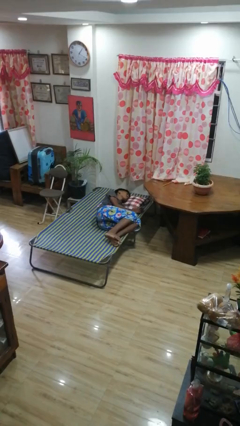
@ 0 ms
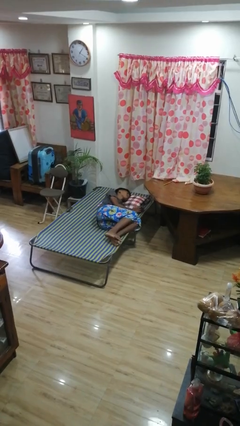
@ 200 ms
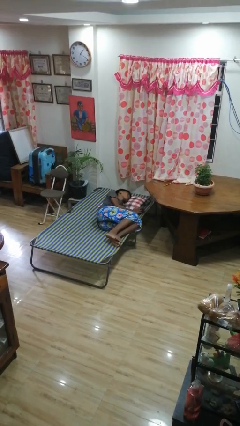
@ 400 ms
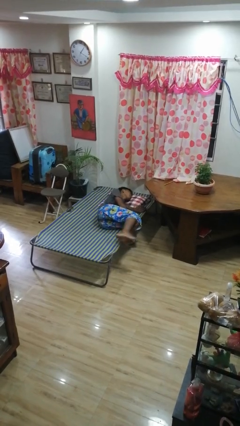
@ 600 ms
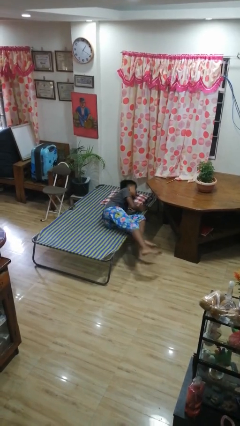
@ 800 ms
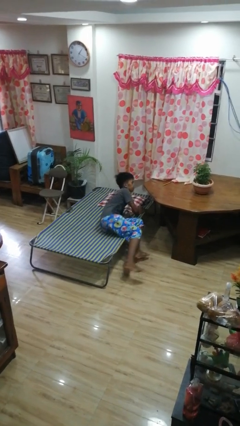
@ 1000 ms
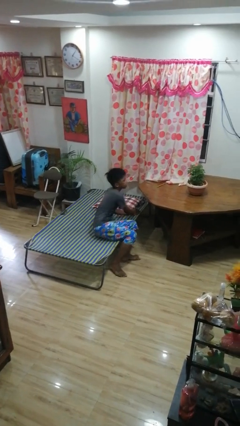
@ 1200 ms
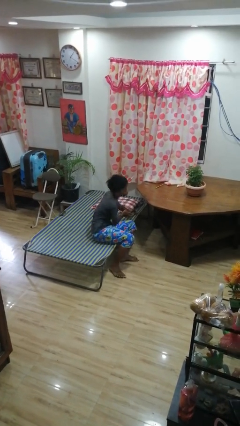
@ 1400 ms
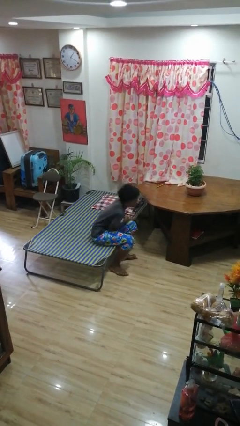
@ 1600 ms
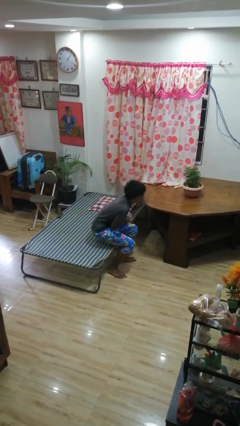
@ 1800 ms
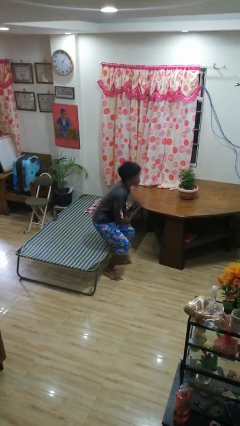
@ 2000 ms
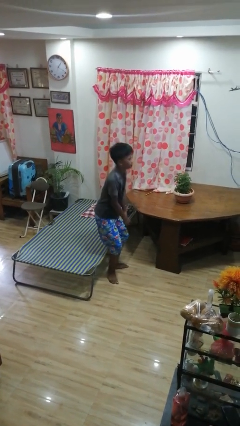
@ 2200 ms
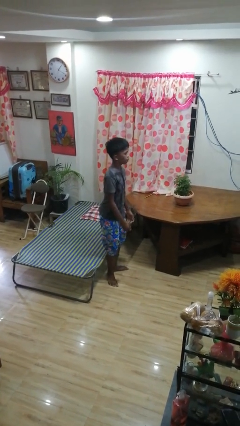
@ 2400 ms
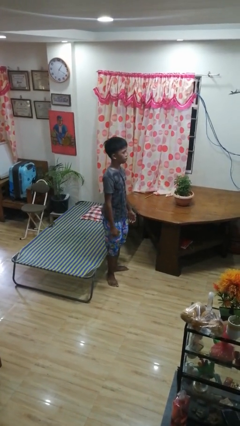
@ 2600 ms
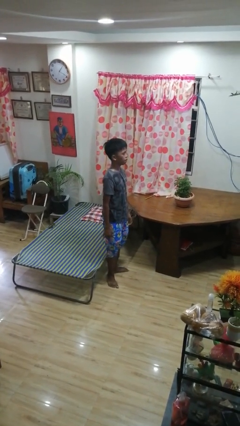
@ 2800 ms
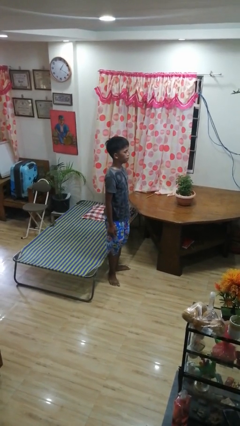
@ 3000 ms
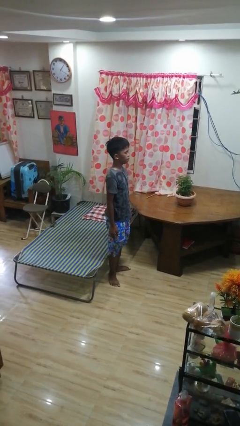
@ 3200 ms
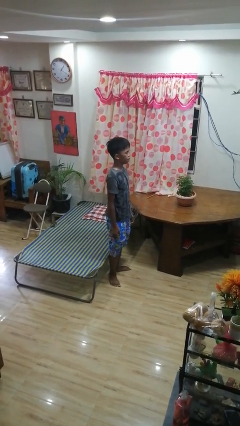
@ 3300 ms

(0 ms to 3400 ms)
person stands up

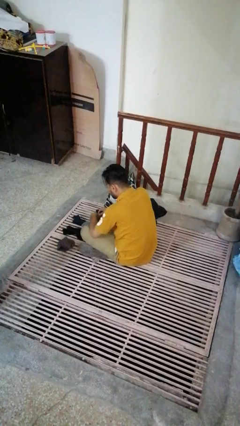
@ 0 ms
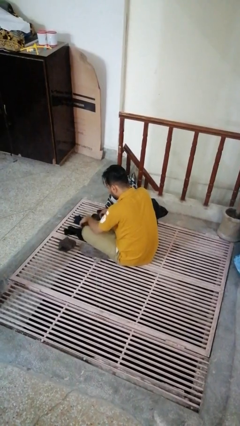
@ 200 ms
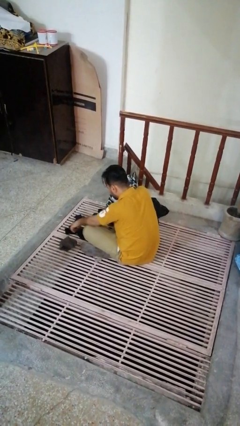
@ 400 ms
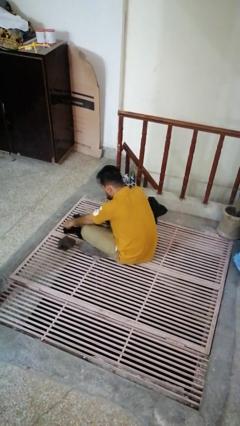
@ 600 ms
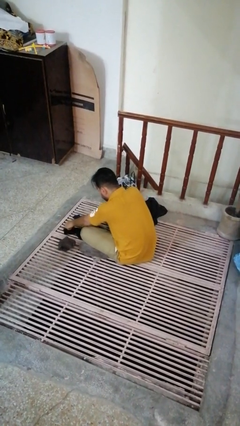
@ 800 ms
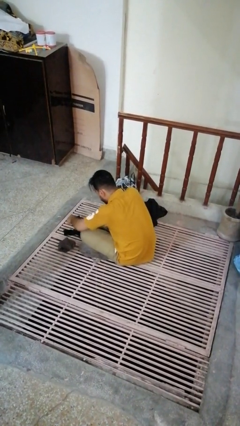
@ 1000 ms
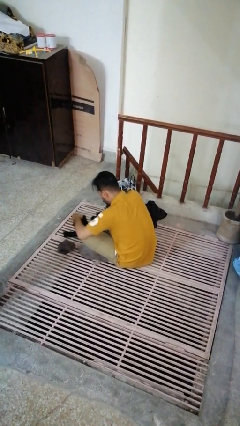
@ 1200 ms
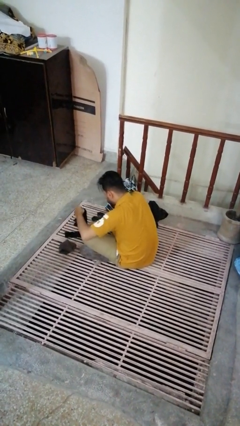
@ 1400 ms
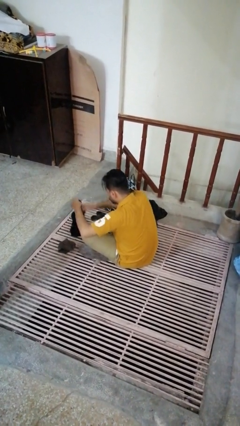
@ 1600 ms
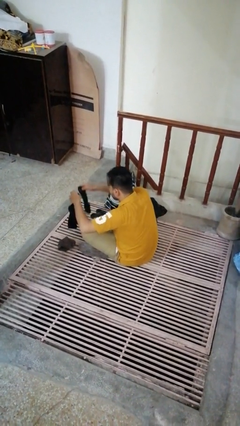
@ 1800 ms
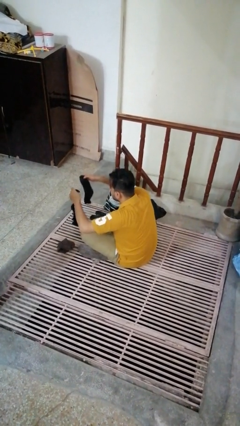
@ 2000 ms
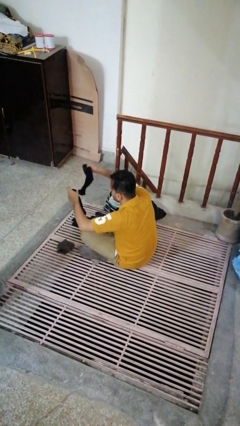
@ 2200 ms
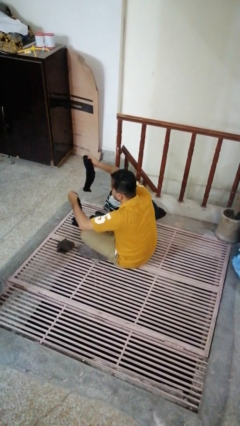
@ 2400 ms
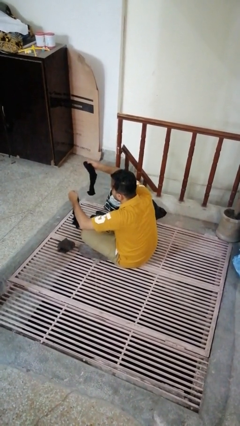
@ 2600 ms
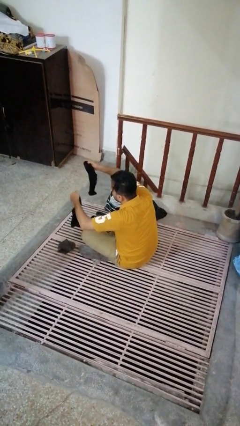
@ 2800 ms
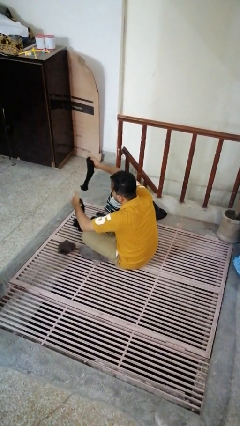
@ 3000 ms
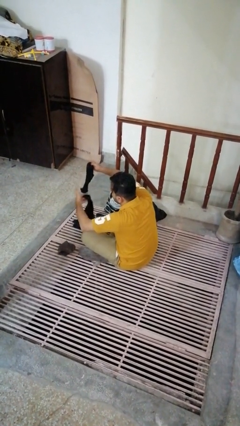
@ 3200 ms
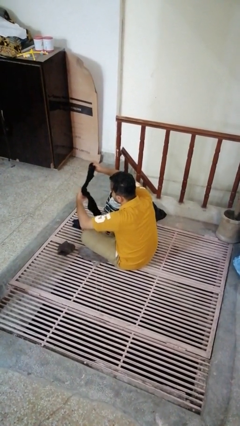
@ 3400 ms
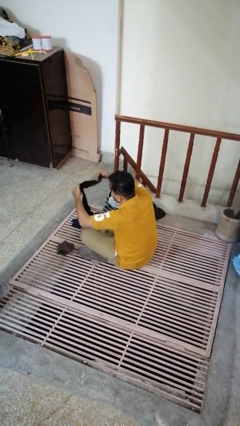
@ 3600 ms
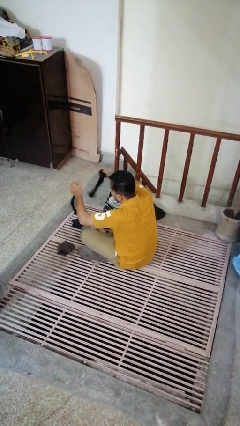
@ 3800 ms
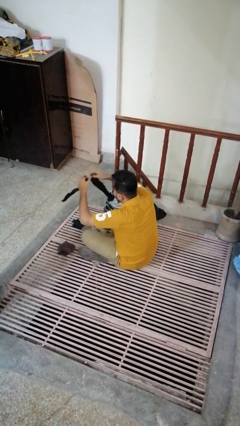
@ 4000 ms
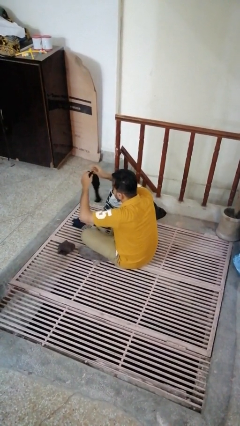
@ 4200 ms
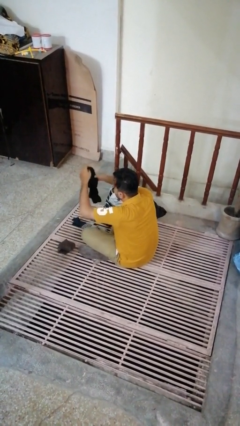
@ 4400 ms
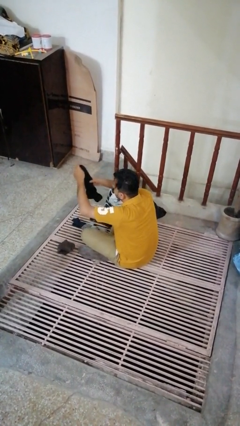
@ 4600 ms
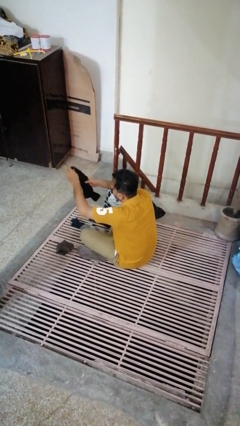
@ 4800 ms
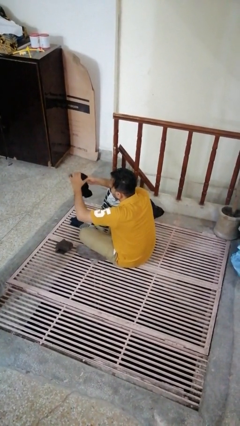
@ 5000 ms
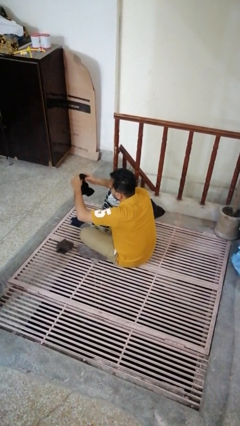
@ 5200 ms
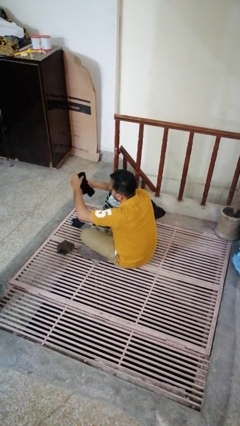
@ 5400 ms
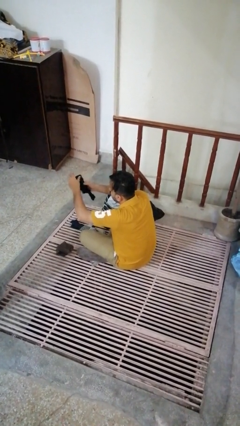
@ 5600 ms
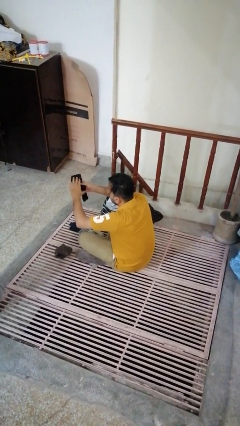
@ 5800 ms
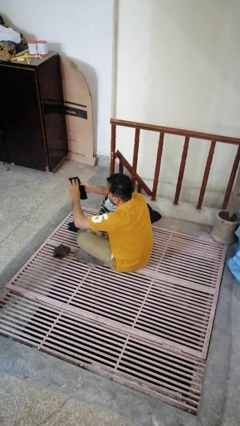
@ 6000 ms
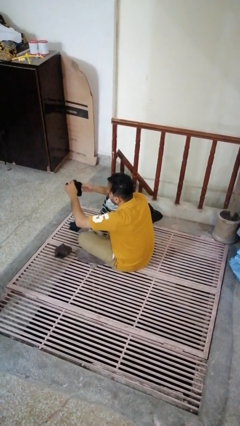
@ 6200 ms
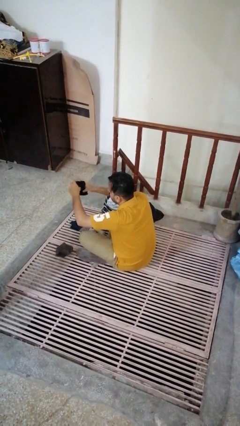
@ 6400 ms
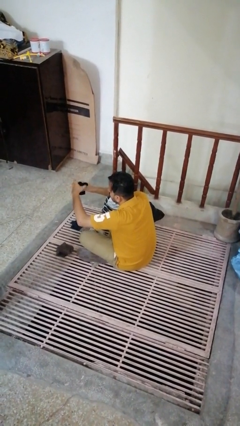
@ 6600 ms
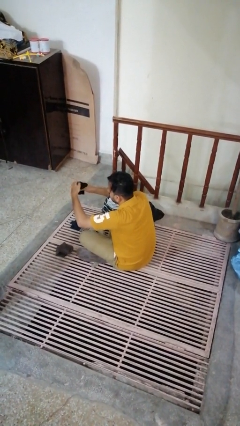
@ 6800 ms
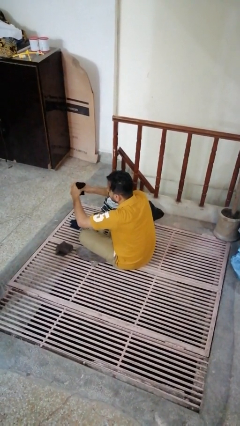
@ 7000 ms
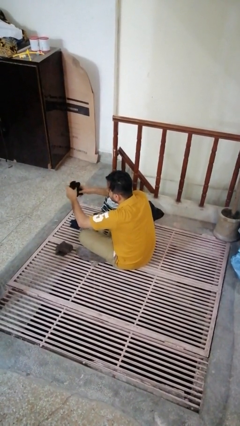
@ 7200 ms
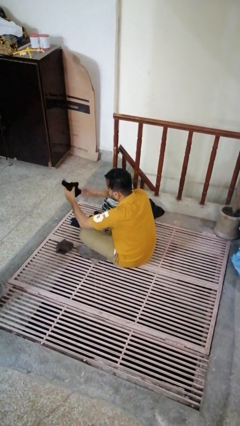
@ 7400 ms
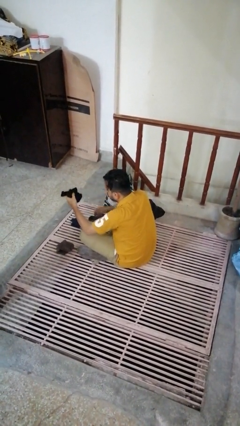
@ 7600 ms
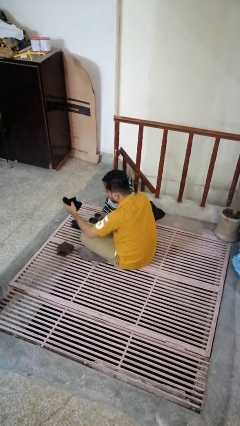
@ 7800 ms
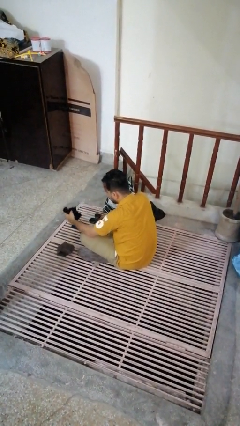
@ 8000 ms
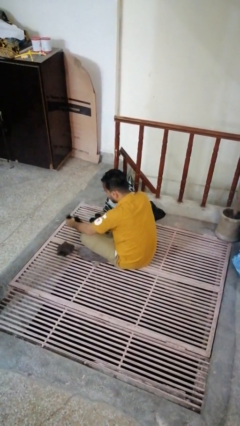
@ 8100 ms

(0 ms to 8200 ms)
person folds socks

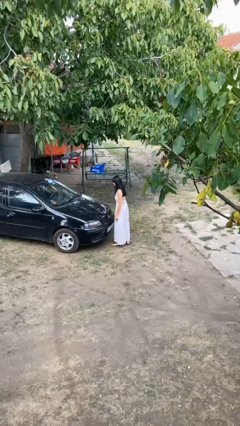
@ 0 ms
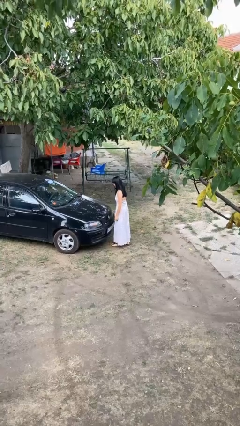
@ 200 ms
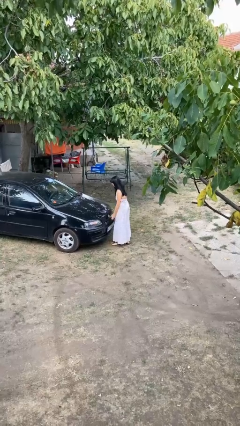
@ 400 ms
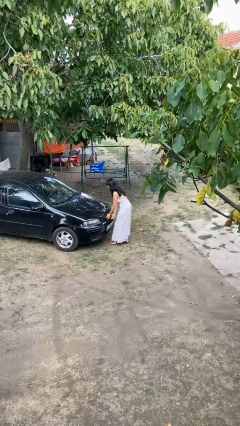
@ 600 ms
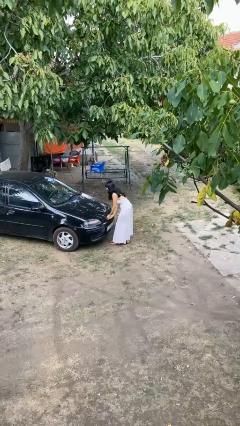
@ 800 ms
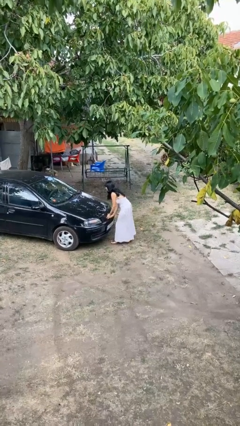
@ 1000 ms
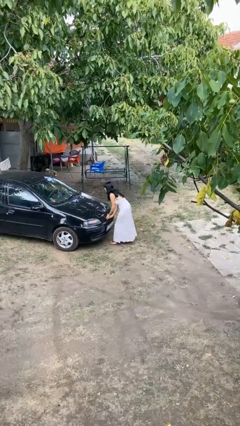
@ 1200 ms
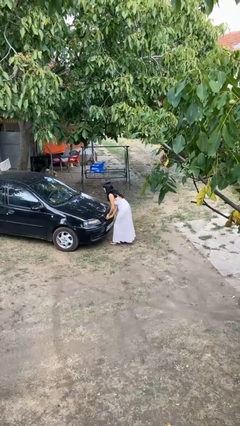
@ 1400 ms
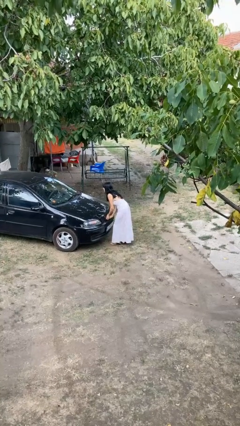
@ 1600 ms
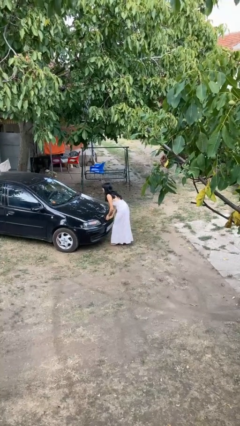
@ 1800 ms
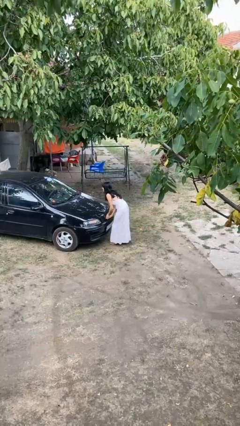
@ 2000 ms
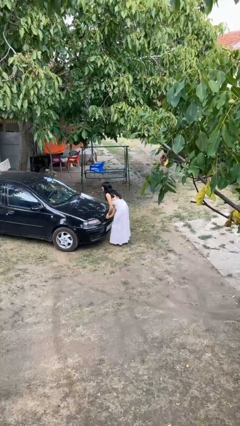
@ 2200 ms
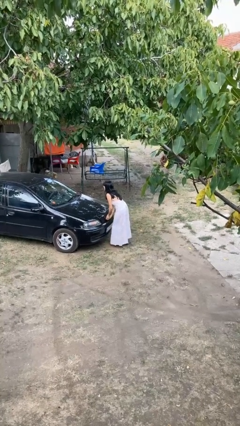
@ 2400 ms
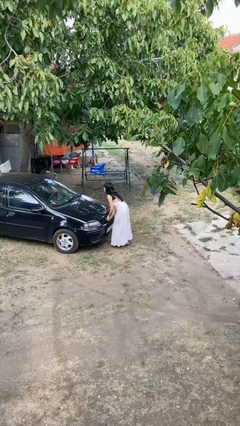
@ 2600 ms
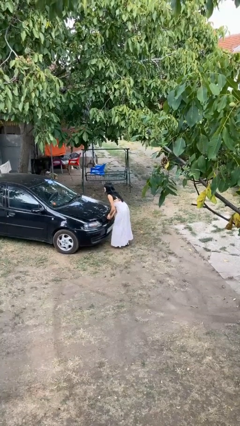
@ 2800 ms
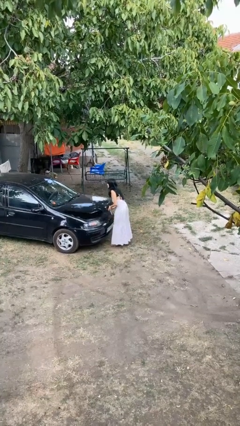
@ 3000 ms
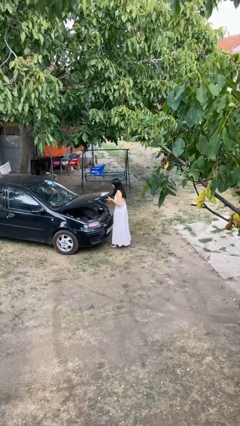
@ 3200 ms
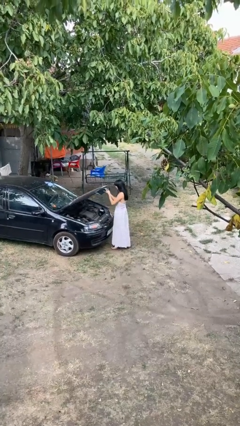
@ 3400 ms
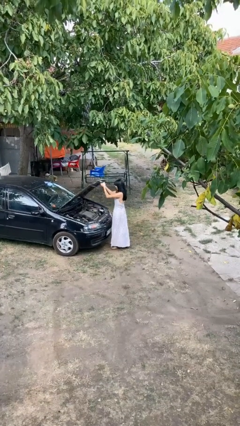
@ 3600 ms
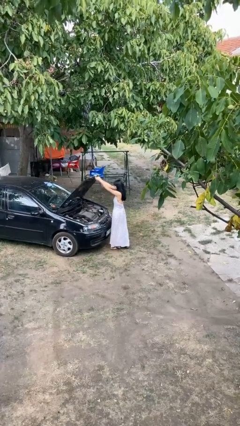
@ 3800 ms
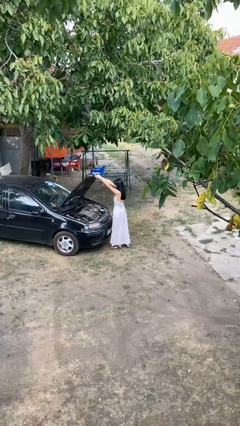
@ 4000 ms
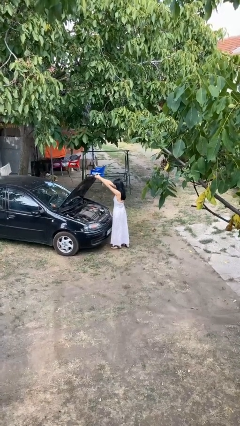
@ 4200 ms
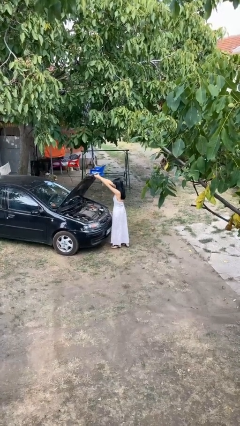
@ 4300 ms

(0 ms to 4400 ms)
person opens car hood

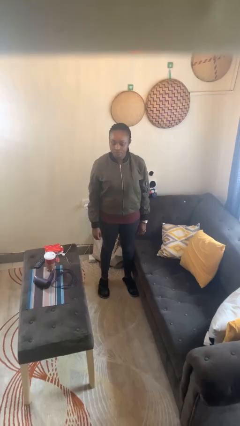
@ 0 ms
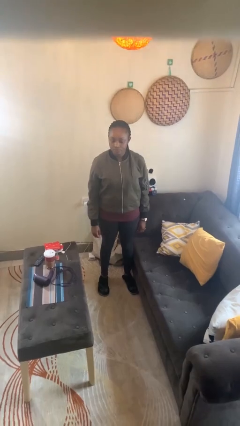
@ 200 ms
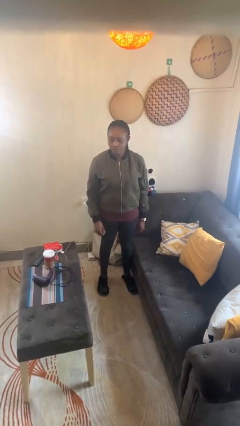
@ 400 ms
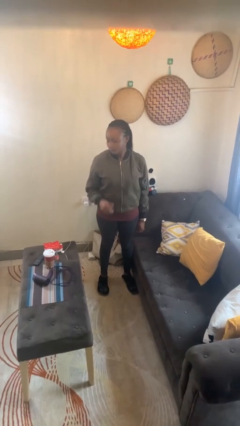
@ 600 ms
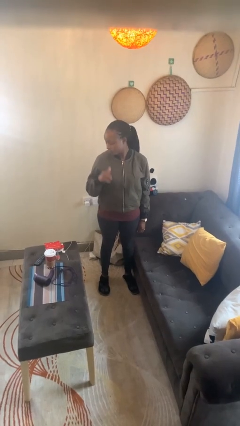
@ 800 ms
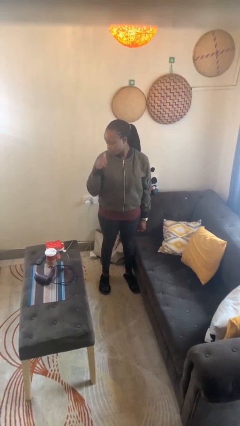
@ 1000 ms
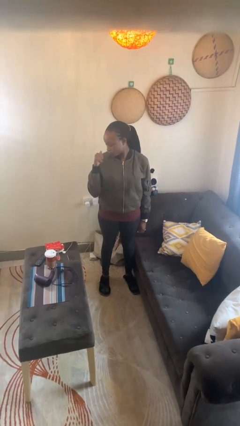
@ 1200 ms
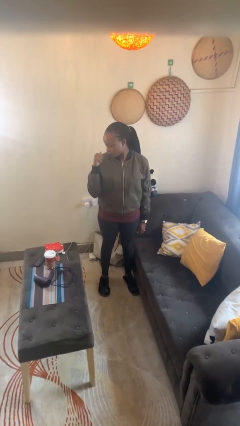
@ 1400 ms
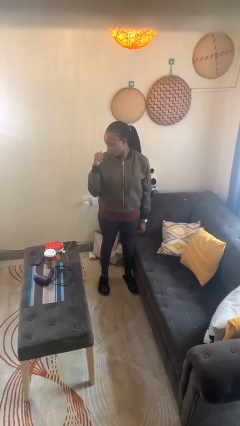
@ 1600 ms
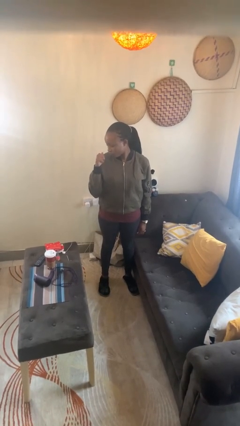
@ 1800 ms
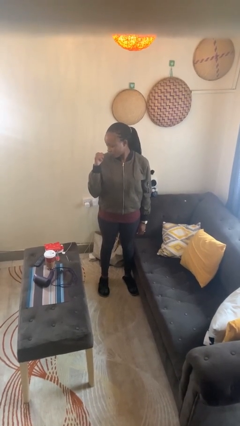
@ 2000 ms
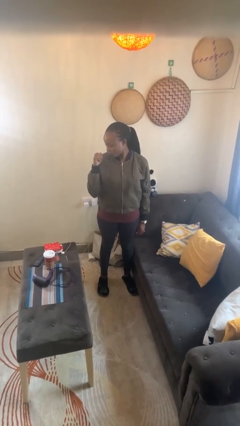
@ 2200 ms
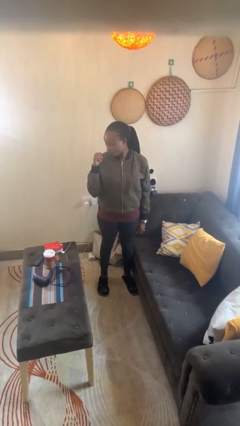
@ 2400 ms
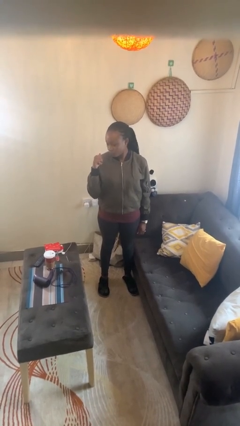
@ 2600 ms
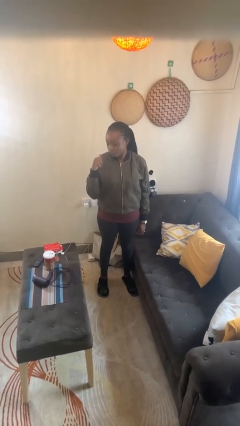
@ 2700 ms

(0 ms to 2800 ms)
person gestures behind me
